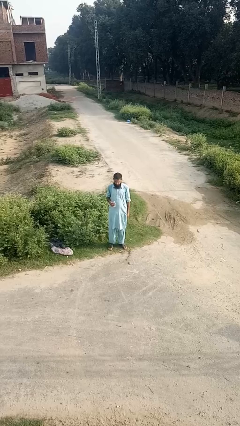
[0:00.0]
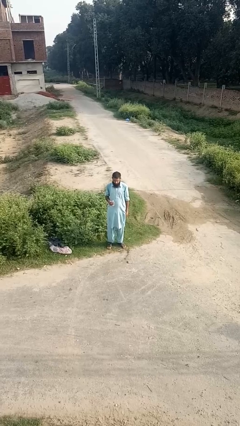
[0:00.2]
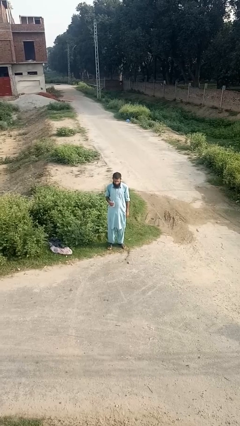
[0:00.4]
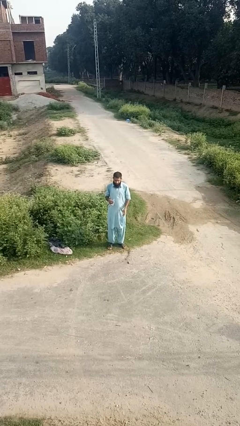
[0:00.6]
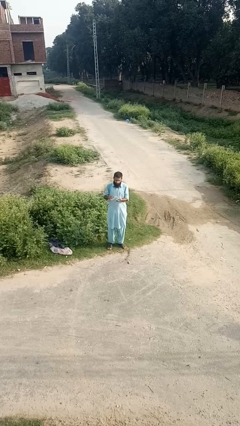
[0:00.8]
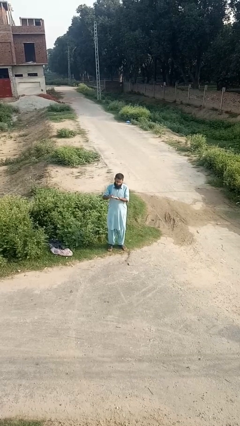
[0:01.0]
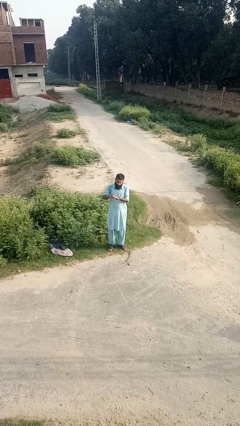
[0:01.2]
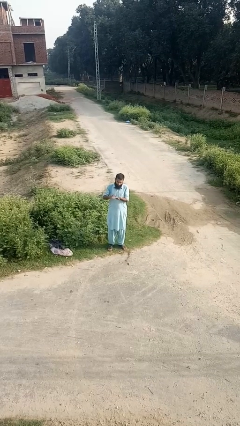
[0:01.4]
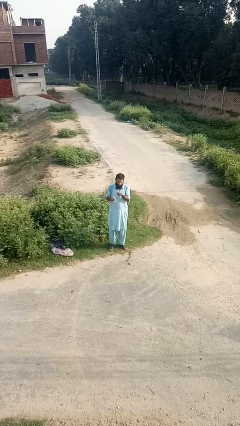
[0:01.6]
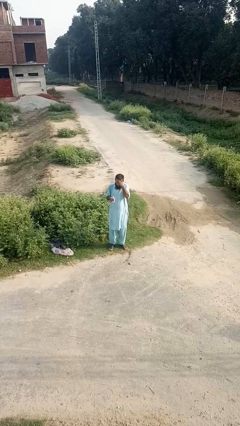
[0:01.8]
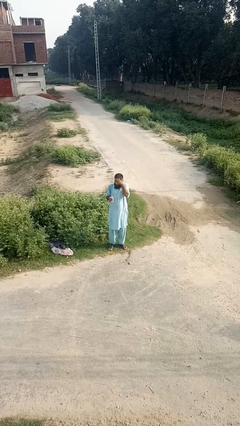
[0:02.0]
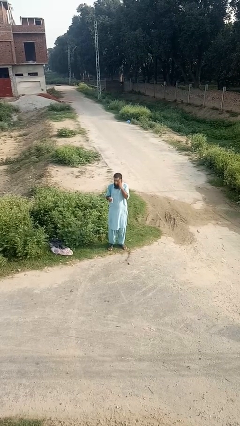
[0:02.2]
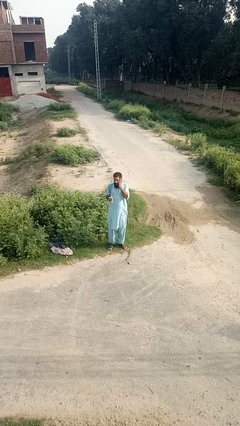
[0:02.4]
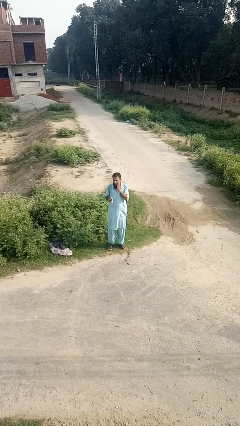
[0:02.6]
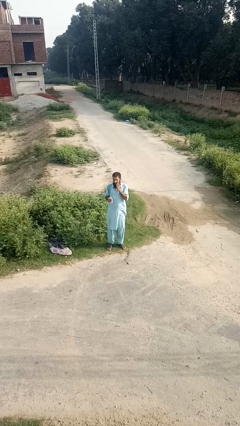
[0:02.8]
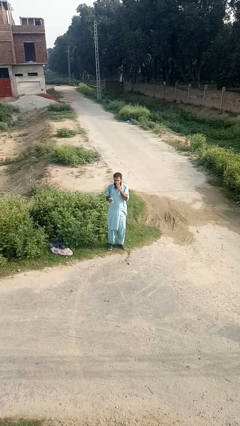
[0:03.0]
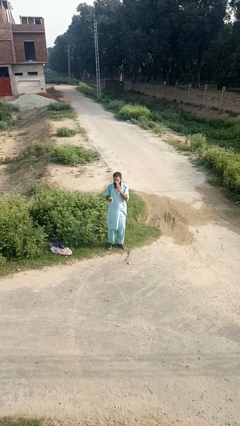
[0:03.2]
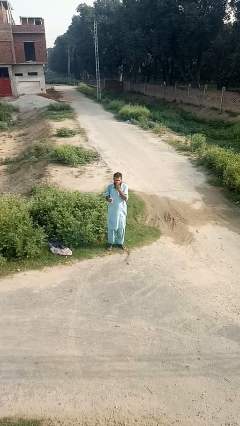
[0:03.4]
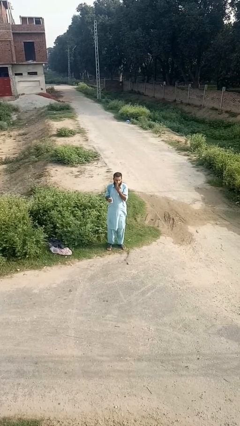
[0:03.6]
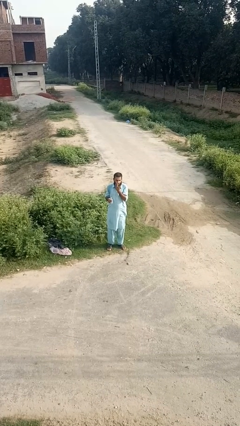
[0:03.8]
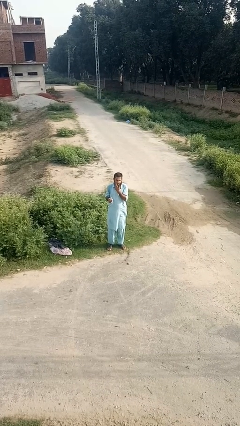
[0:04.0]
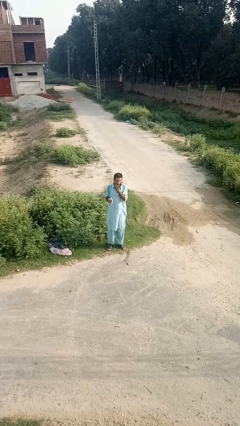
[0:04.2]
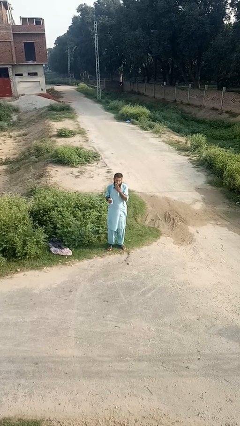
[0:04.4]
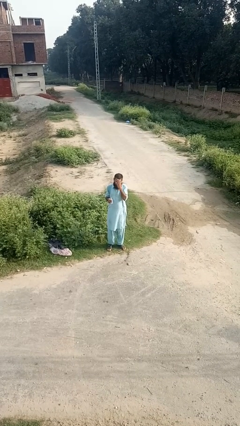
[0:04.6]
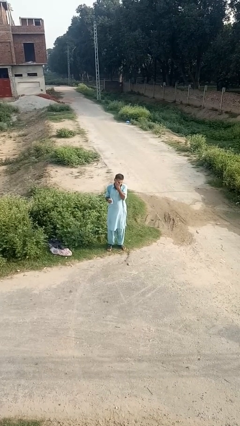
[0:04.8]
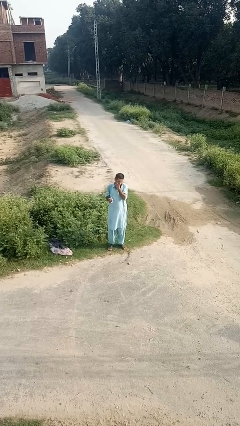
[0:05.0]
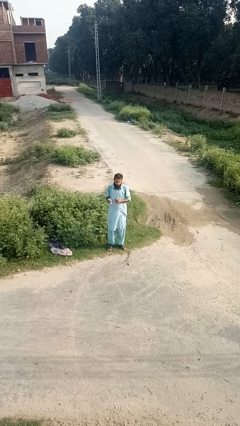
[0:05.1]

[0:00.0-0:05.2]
person applies facial moisturizer

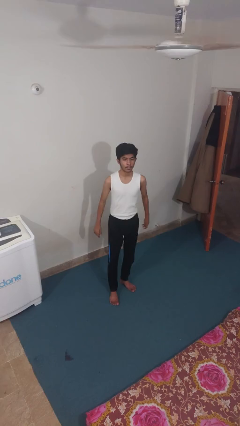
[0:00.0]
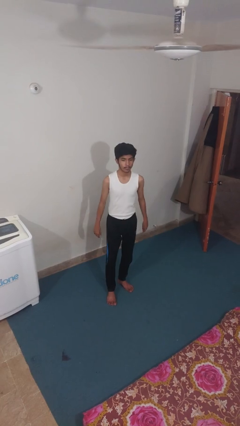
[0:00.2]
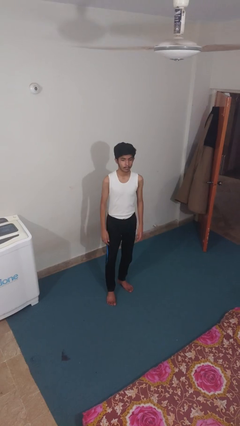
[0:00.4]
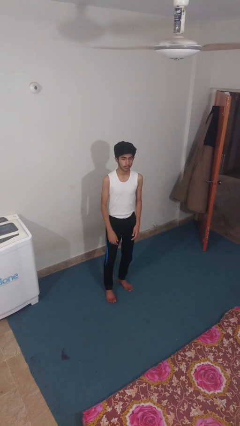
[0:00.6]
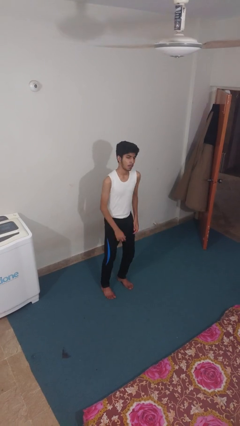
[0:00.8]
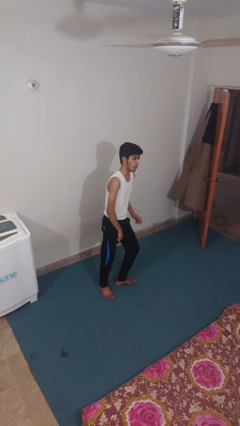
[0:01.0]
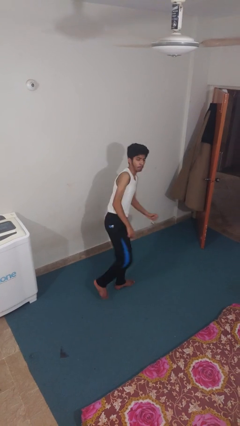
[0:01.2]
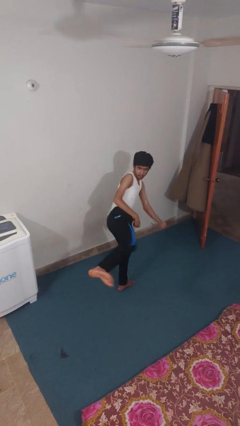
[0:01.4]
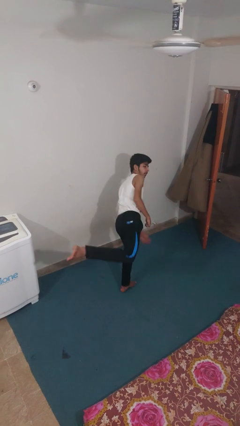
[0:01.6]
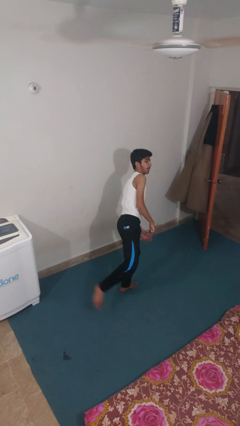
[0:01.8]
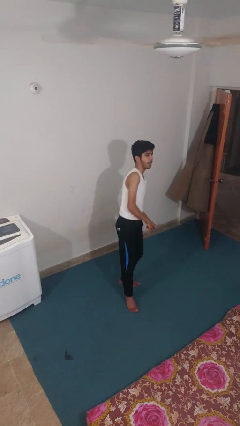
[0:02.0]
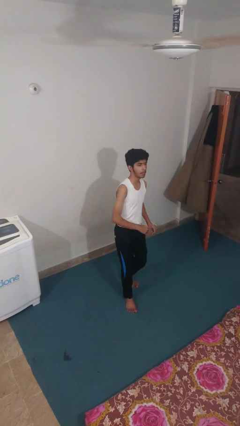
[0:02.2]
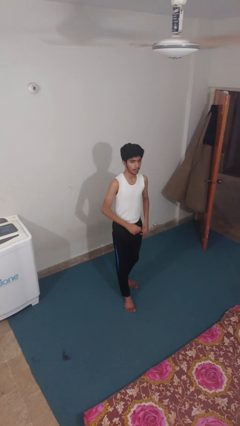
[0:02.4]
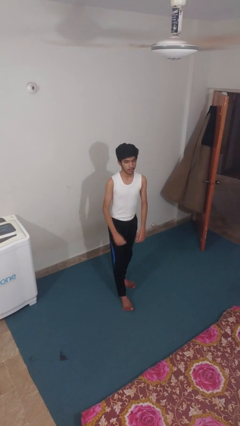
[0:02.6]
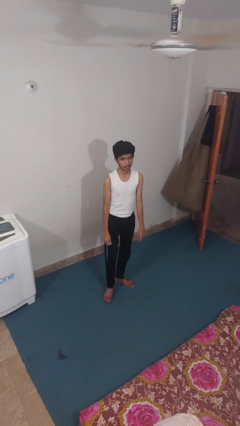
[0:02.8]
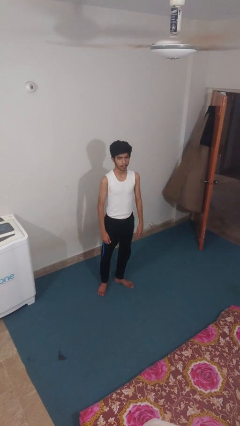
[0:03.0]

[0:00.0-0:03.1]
person karate kicks

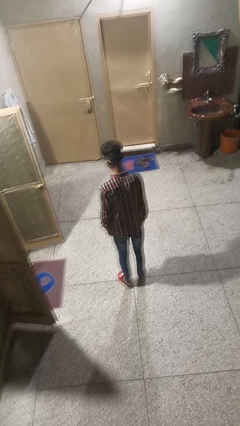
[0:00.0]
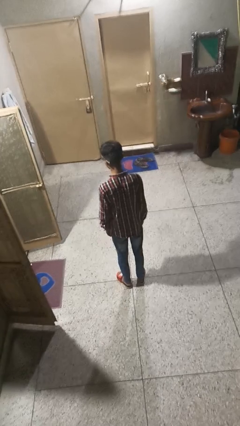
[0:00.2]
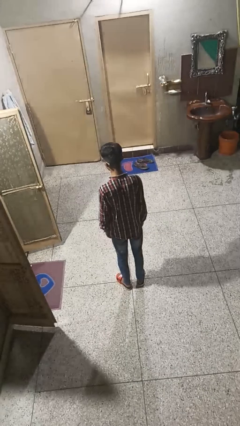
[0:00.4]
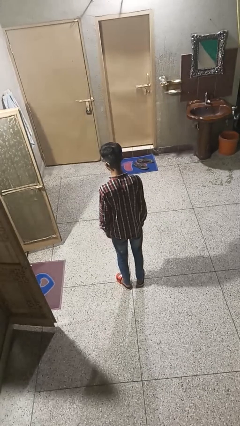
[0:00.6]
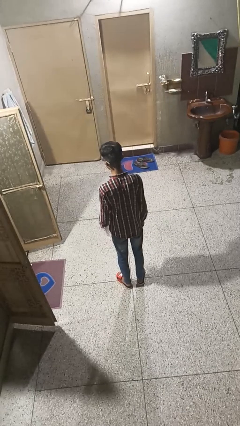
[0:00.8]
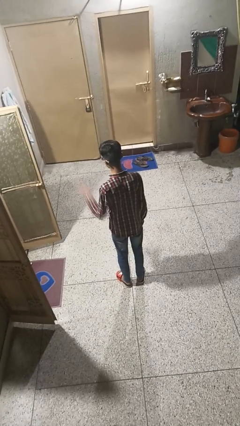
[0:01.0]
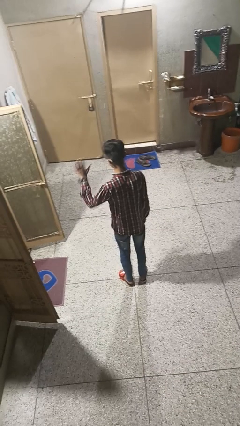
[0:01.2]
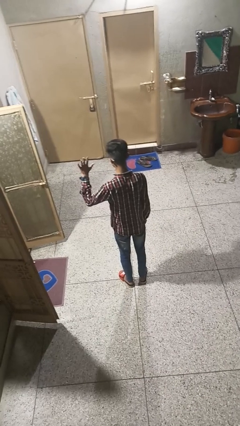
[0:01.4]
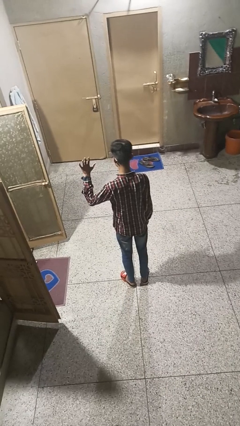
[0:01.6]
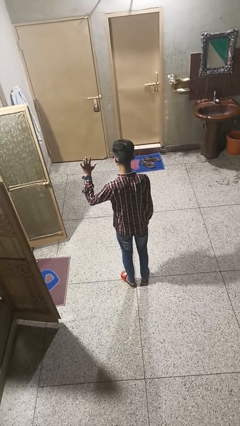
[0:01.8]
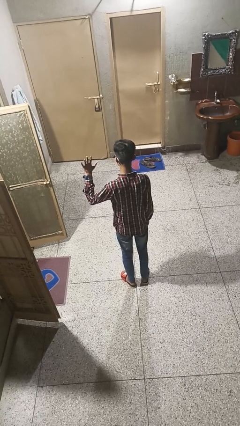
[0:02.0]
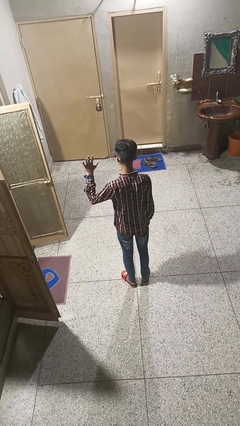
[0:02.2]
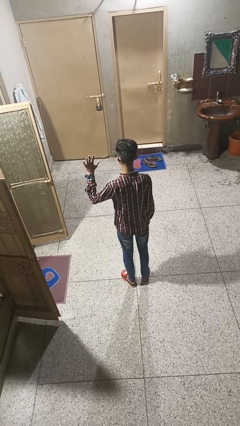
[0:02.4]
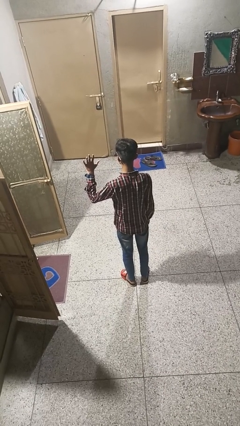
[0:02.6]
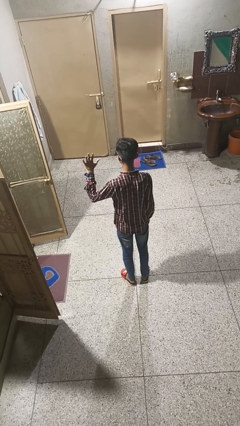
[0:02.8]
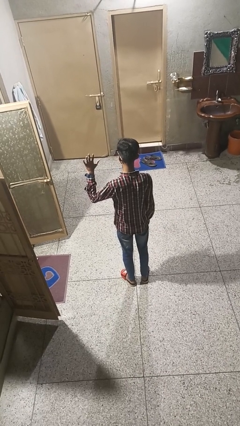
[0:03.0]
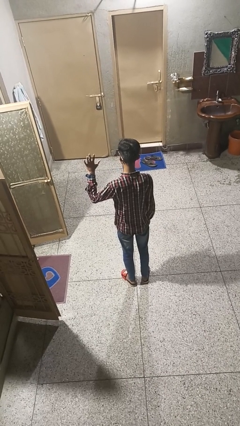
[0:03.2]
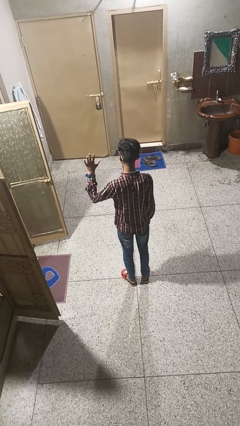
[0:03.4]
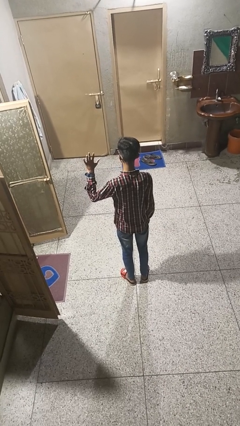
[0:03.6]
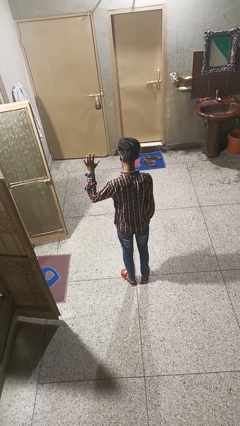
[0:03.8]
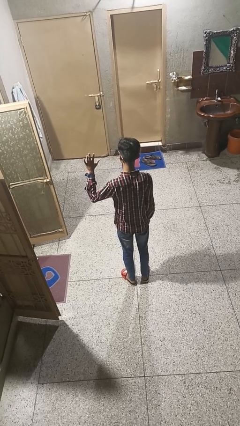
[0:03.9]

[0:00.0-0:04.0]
person gestures number five

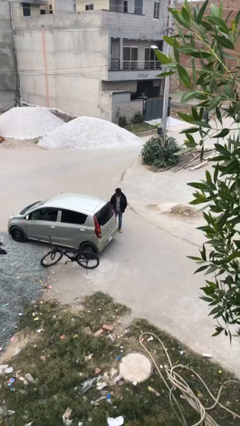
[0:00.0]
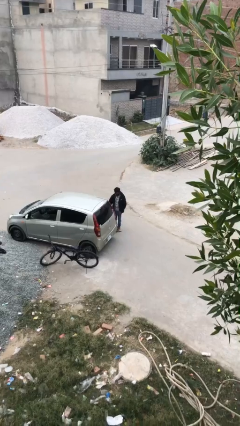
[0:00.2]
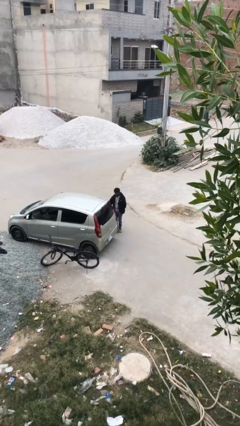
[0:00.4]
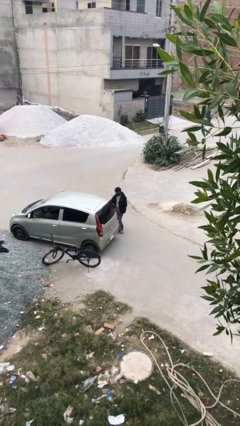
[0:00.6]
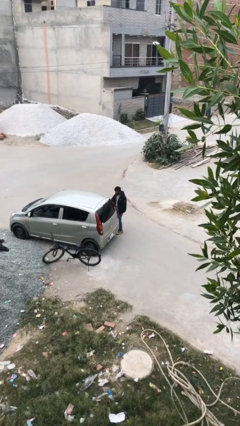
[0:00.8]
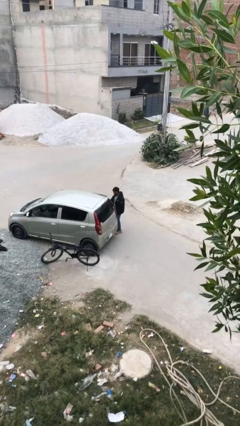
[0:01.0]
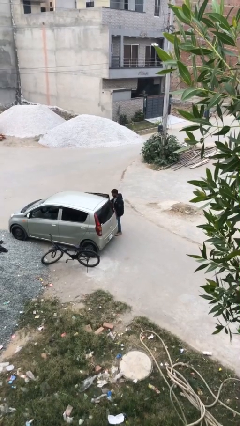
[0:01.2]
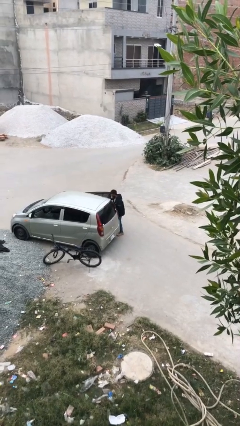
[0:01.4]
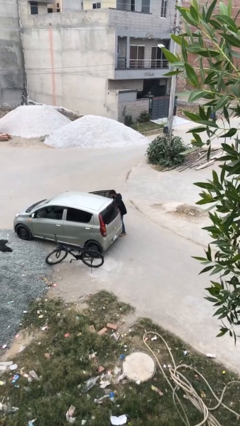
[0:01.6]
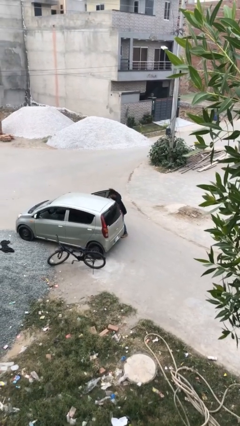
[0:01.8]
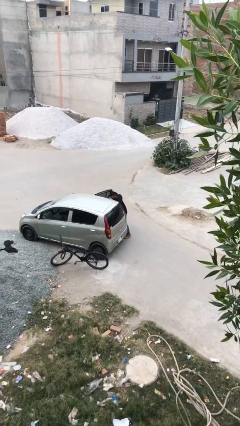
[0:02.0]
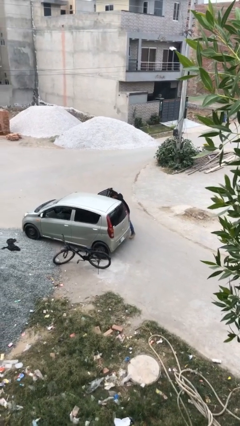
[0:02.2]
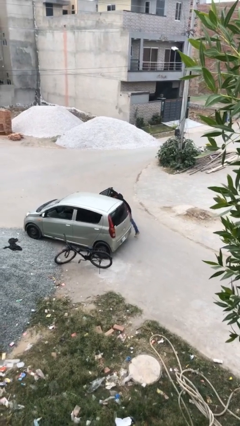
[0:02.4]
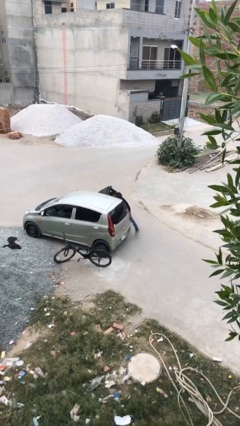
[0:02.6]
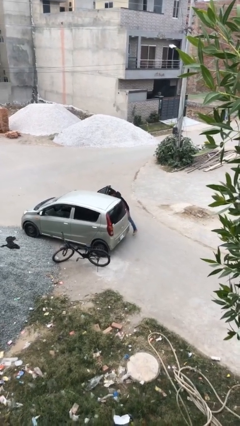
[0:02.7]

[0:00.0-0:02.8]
person opens car door

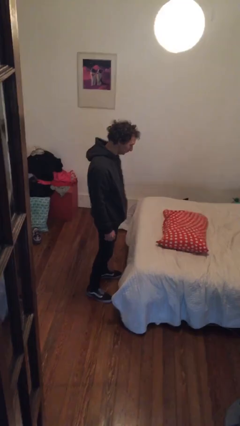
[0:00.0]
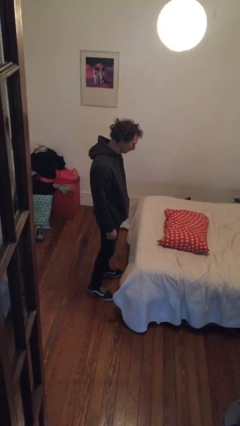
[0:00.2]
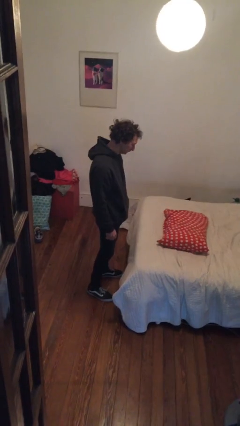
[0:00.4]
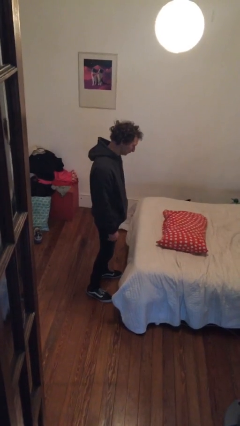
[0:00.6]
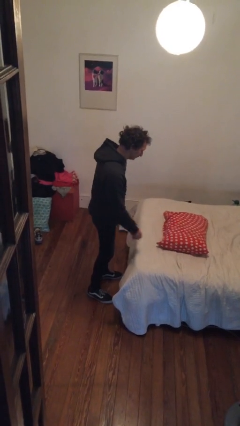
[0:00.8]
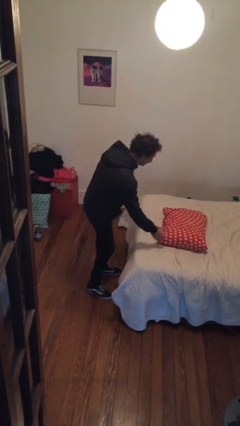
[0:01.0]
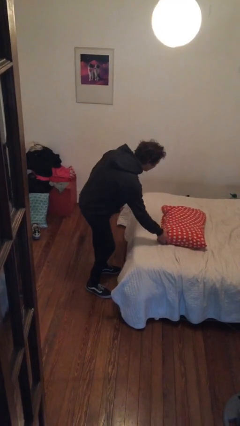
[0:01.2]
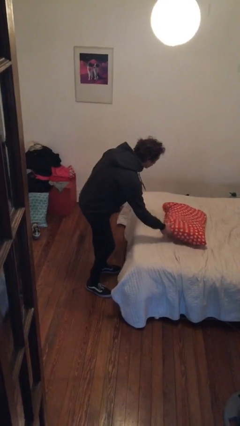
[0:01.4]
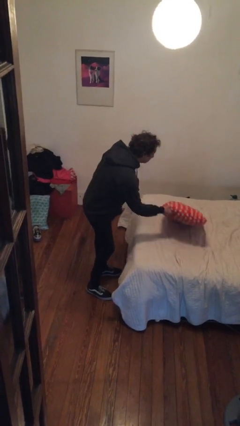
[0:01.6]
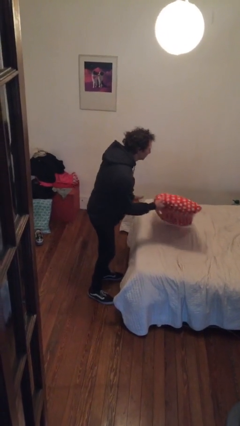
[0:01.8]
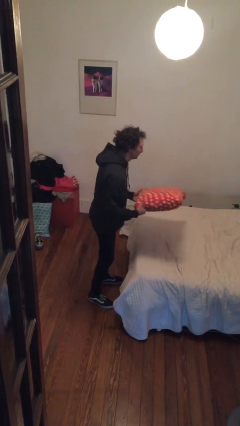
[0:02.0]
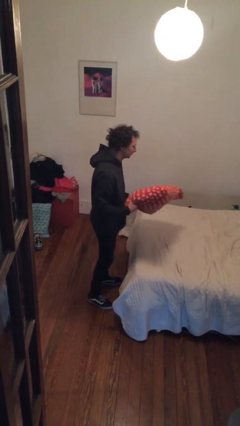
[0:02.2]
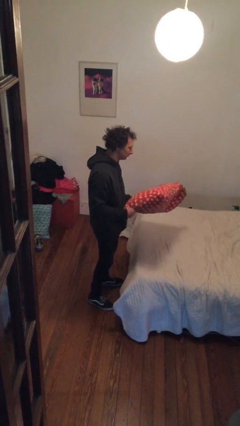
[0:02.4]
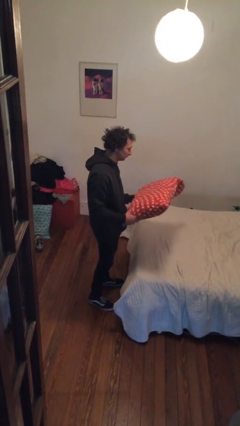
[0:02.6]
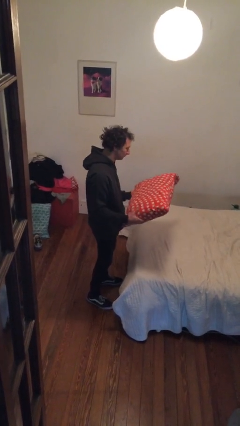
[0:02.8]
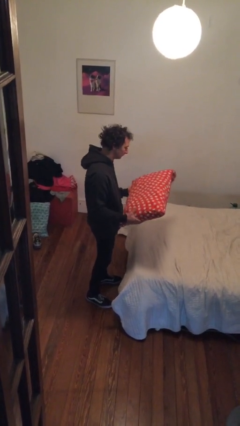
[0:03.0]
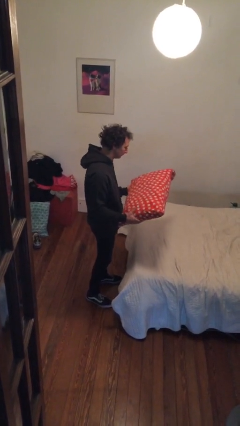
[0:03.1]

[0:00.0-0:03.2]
person picks up object from bed
